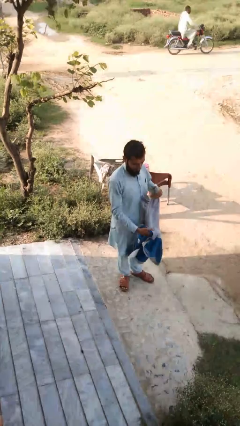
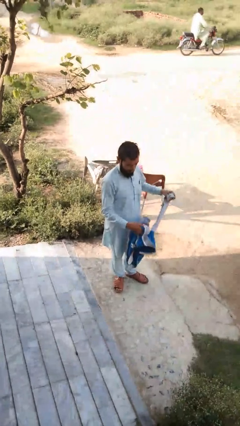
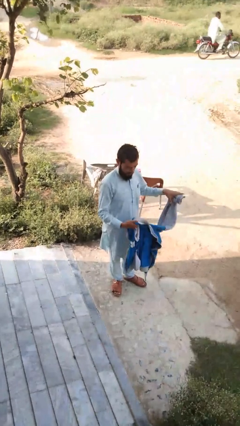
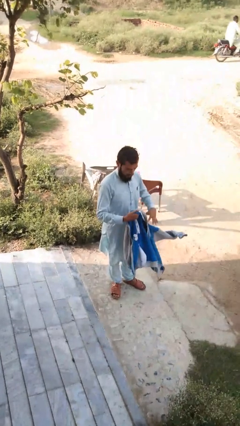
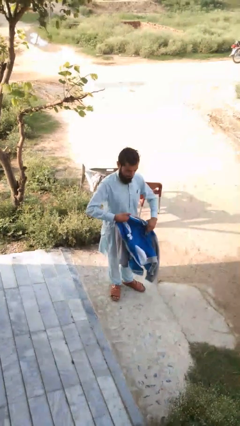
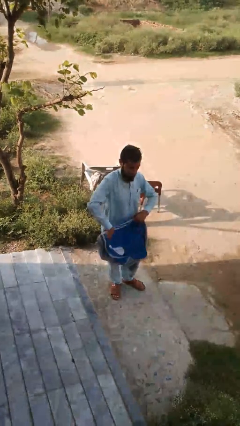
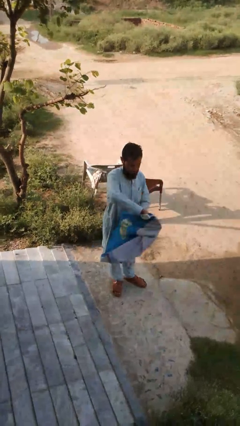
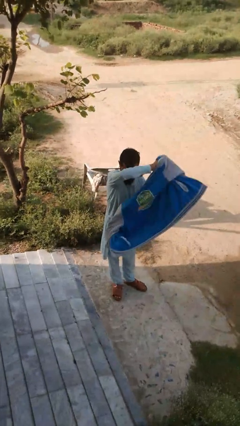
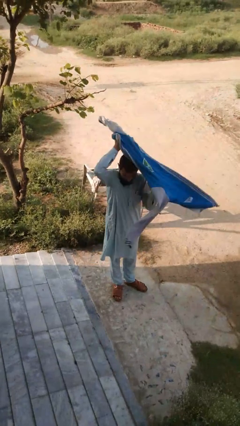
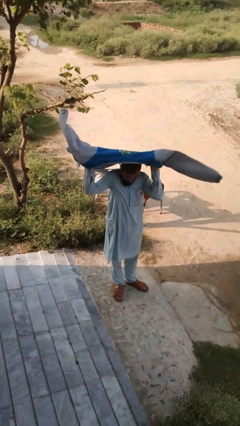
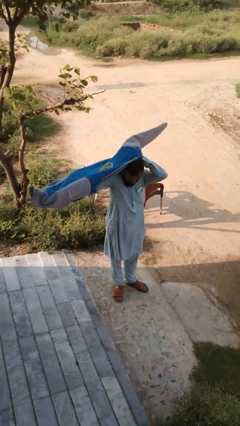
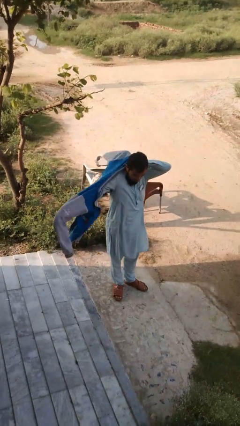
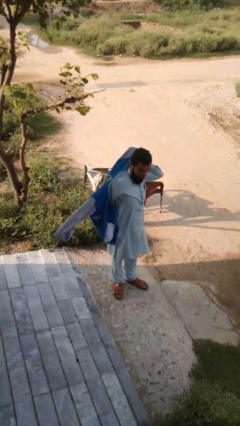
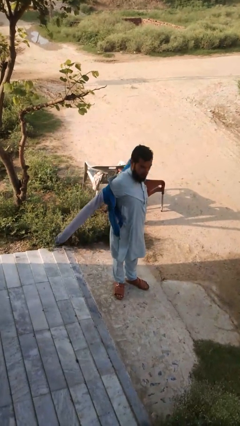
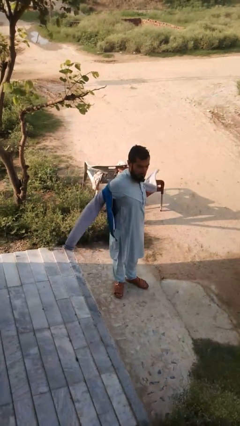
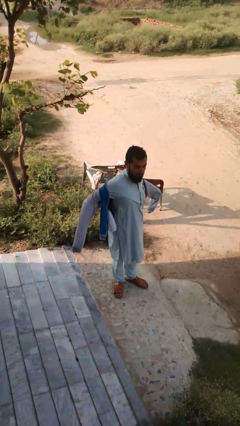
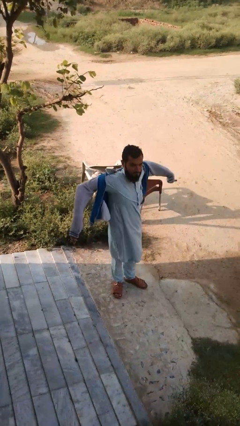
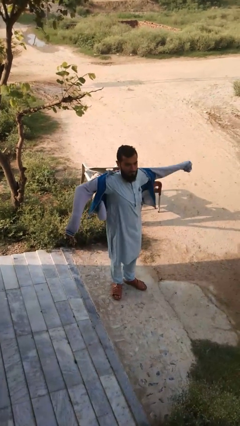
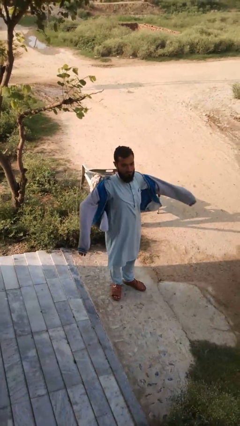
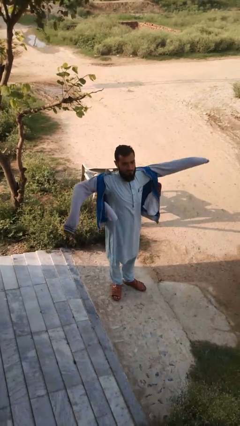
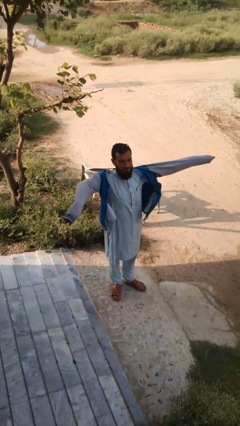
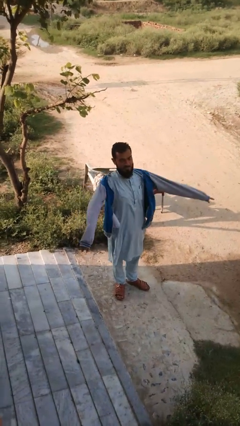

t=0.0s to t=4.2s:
person puts on jacket

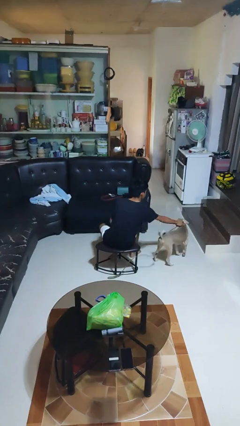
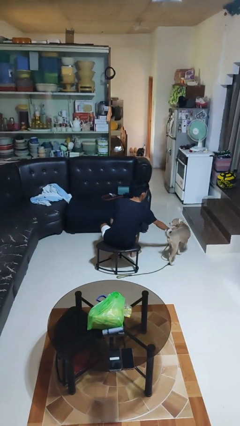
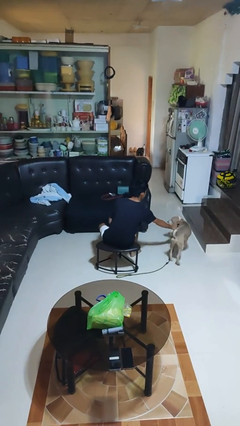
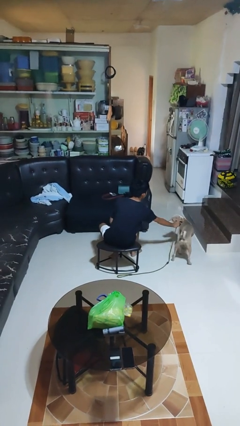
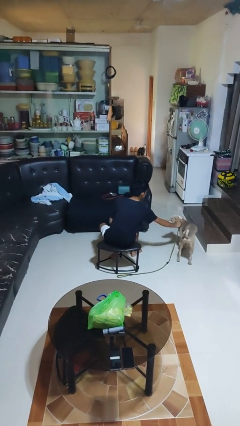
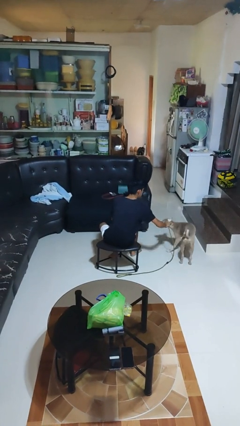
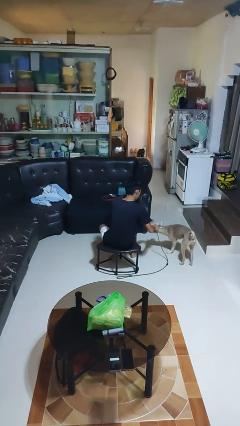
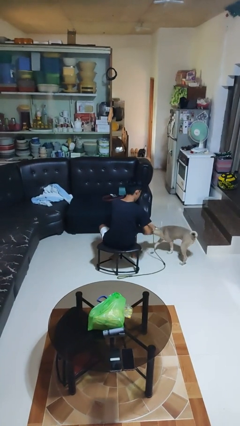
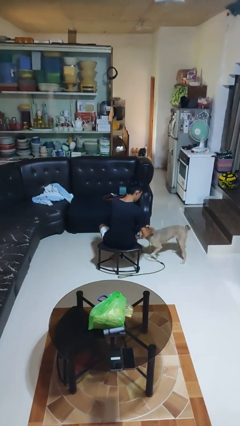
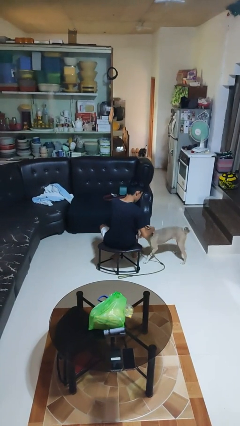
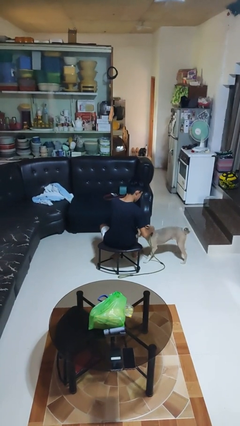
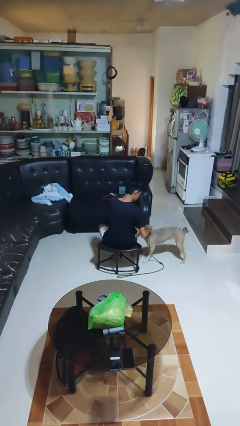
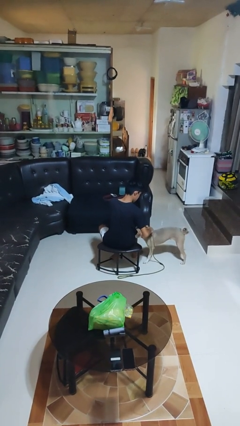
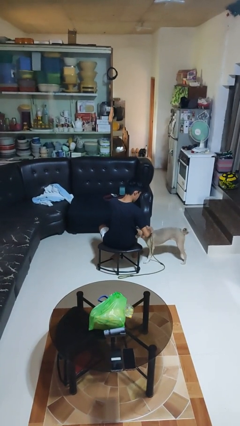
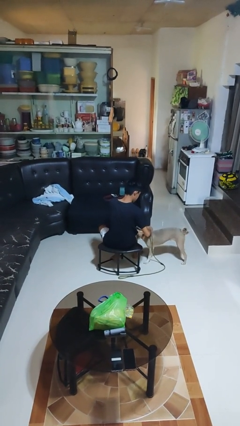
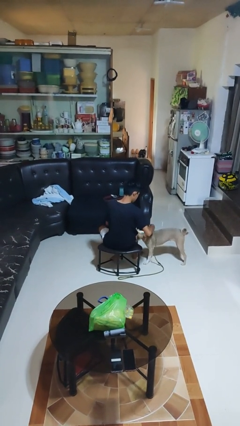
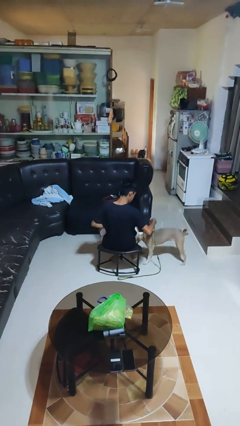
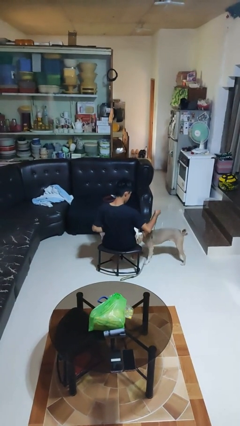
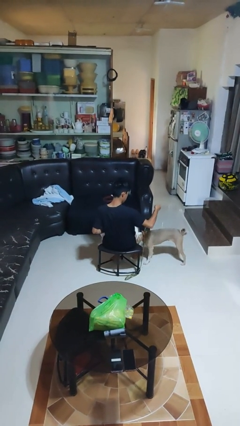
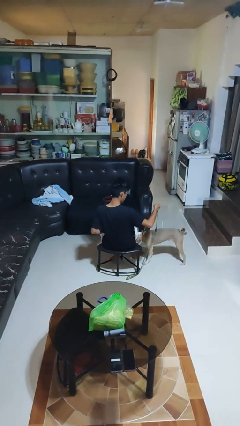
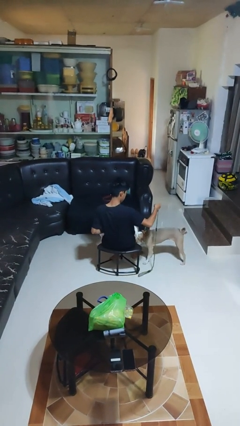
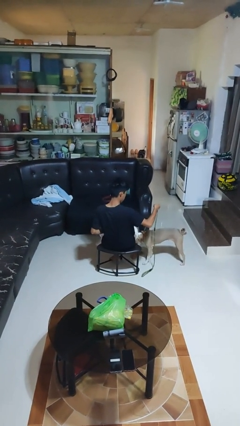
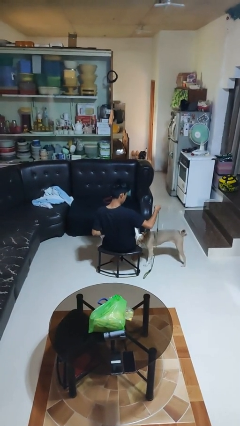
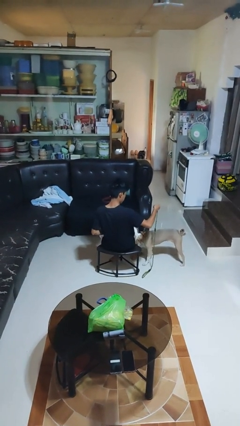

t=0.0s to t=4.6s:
person attaches leash to dog

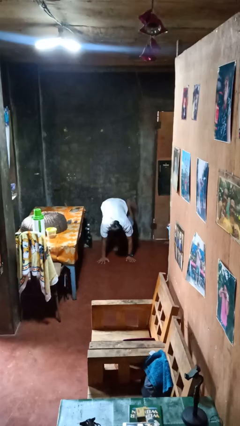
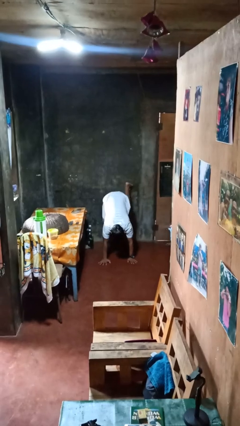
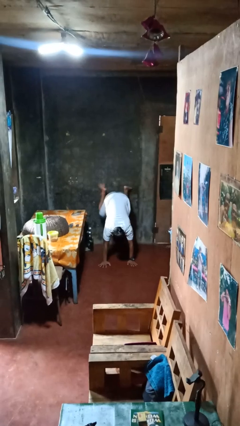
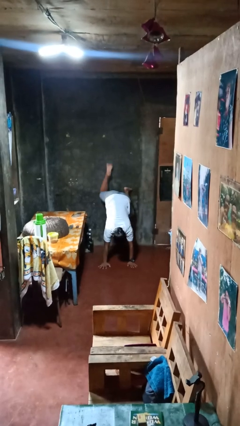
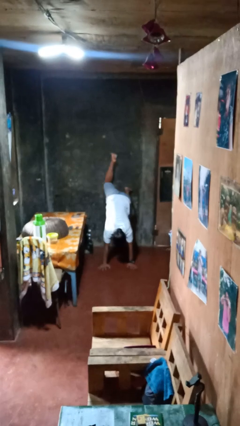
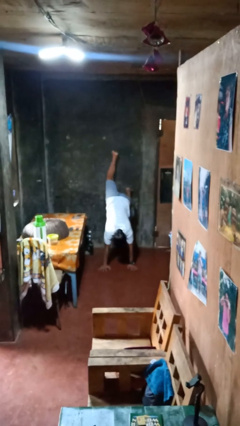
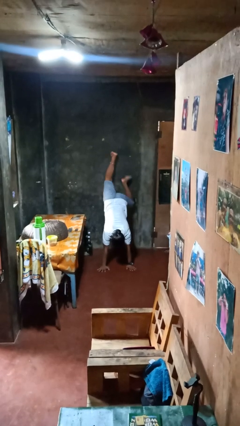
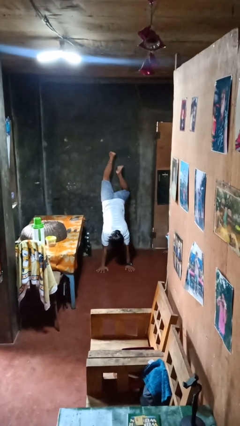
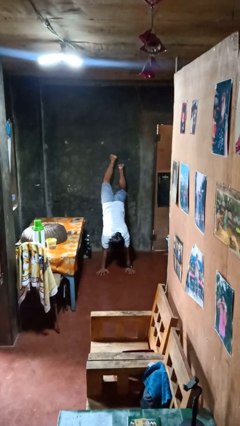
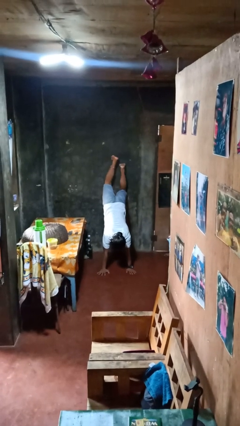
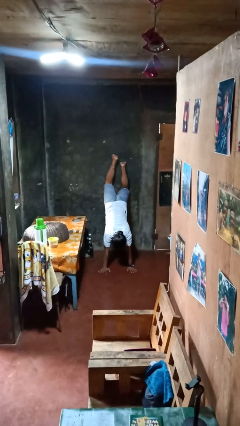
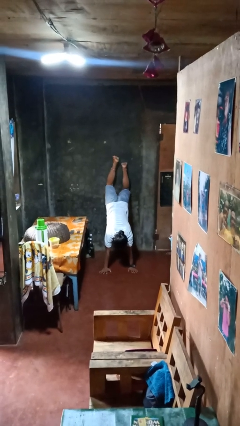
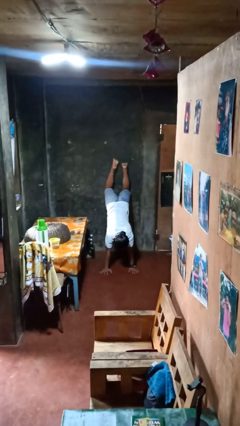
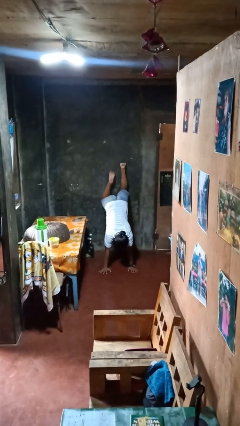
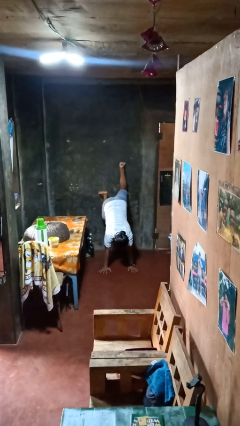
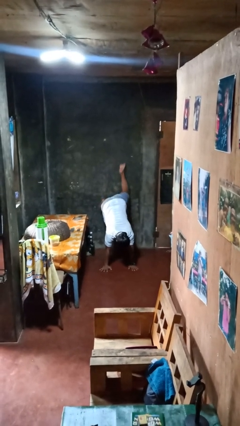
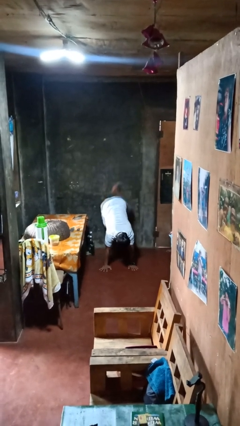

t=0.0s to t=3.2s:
person handstand

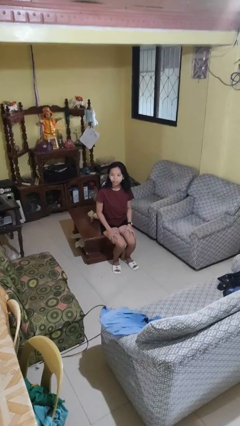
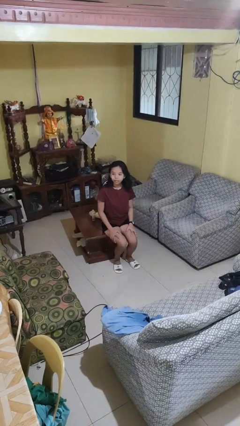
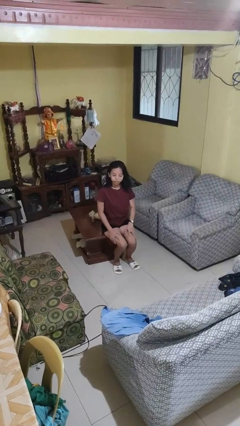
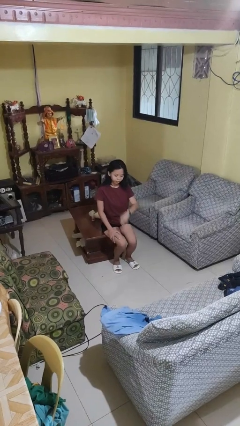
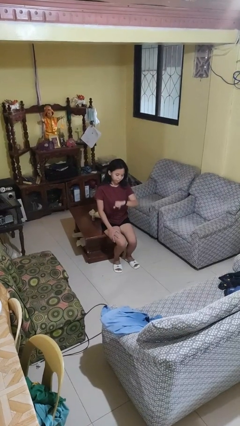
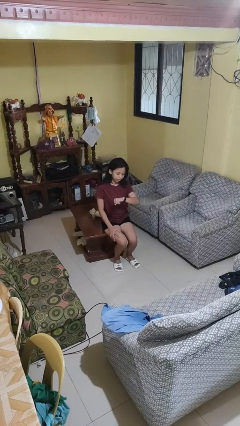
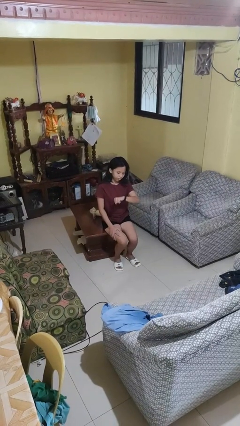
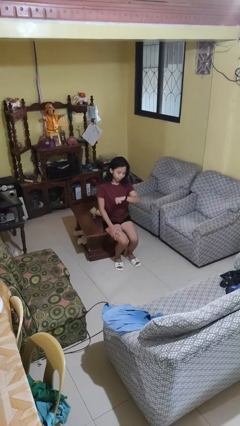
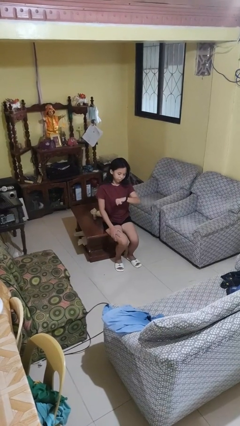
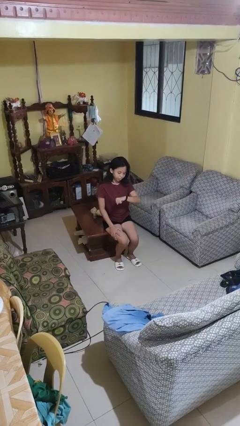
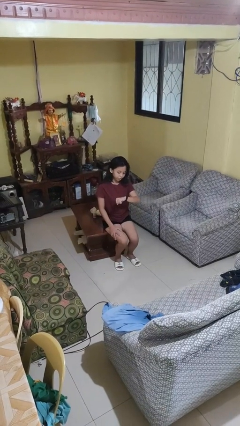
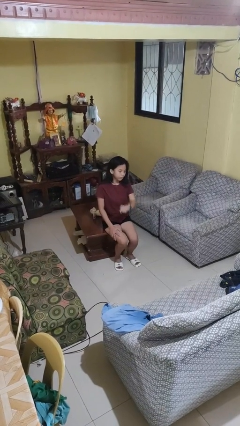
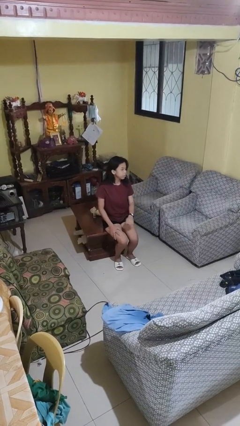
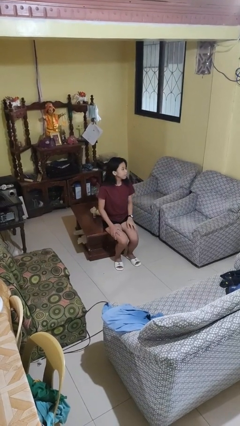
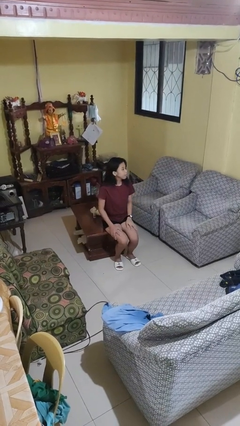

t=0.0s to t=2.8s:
person looks at wristwatch

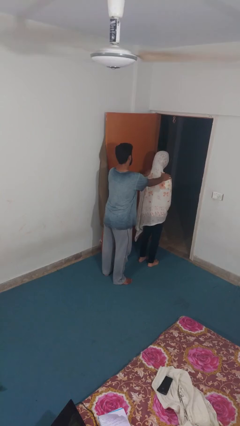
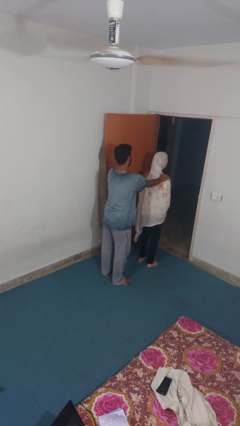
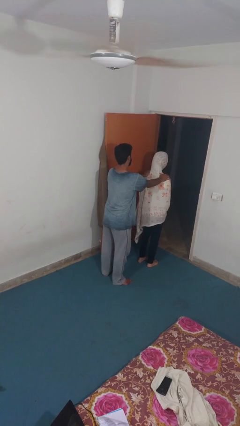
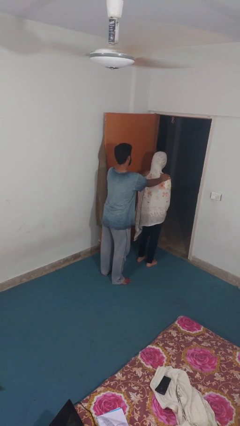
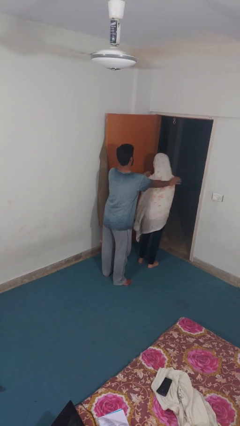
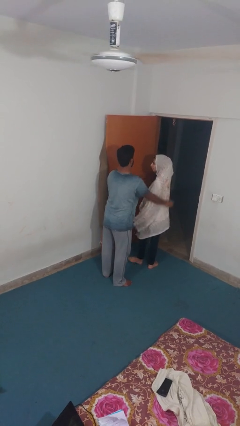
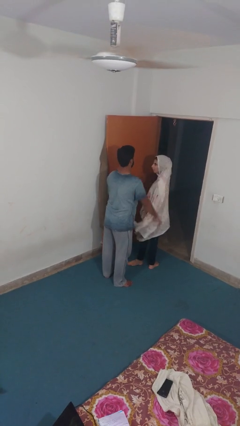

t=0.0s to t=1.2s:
person spins person around

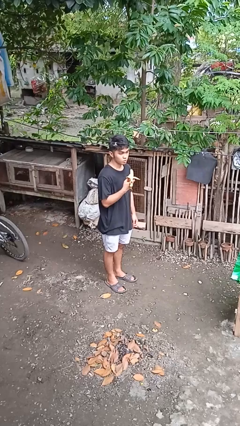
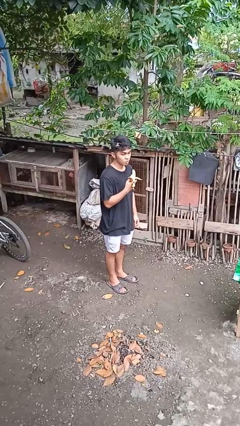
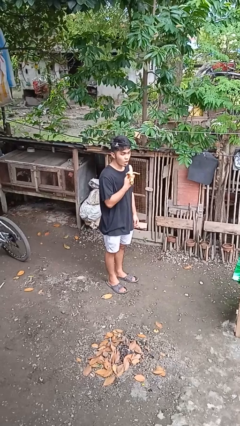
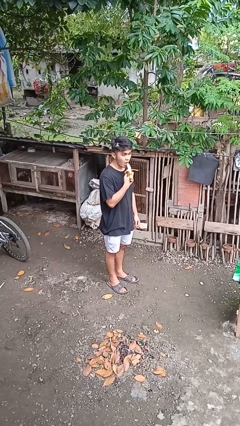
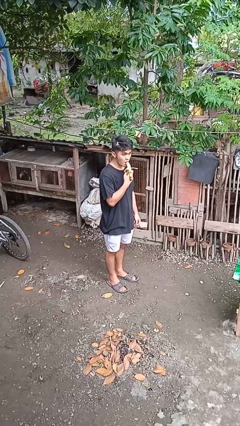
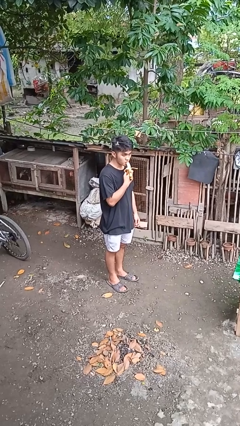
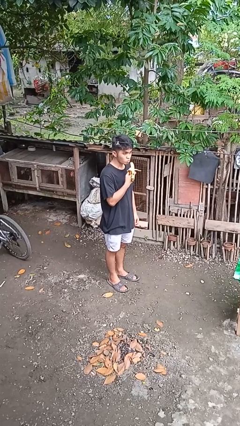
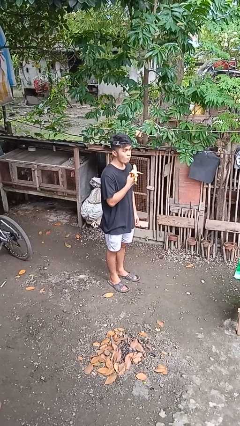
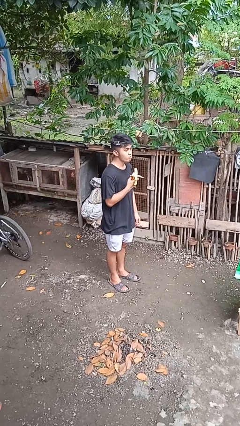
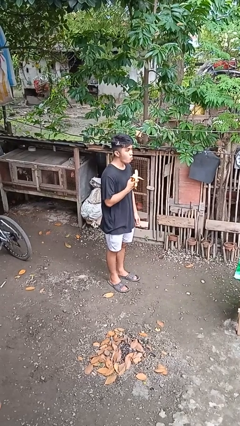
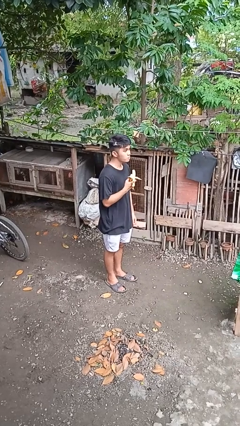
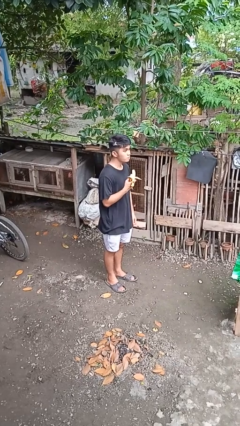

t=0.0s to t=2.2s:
person eats banana
